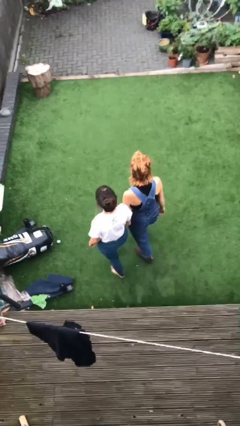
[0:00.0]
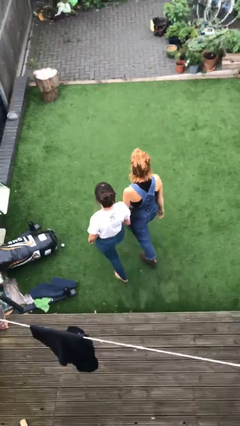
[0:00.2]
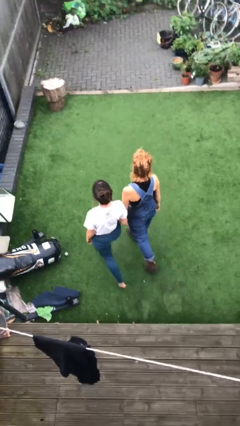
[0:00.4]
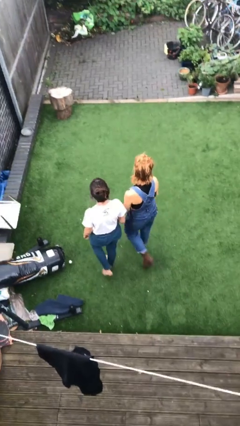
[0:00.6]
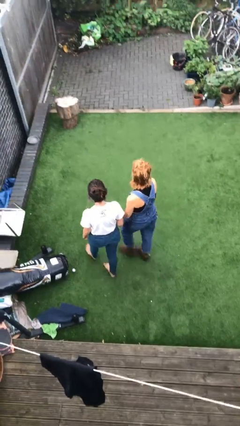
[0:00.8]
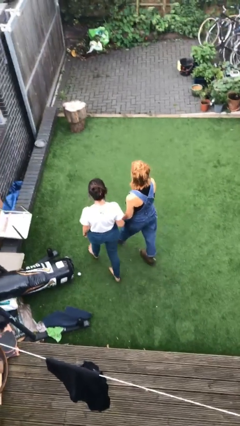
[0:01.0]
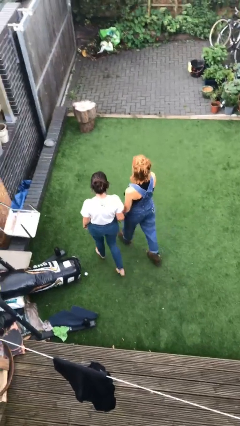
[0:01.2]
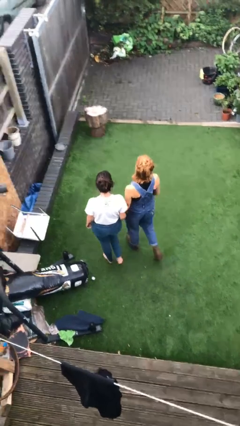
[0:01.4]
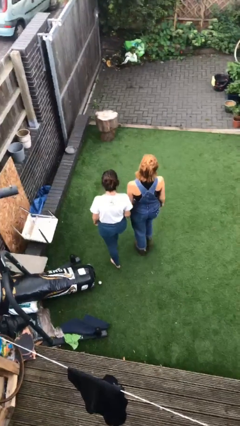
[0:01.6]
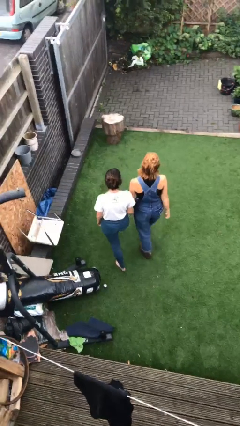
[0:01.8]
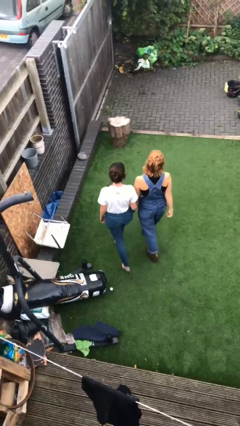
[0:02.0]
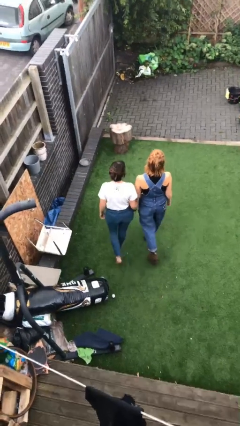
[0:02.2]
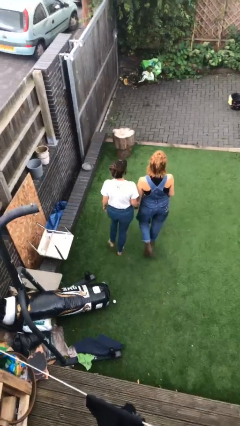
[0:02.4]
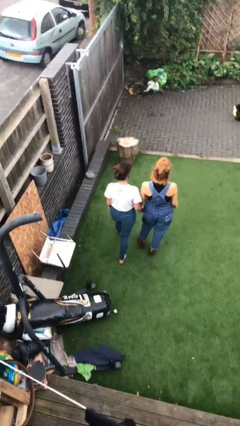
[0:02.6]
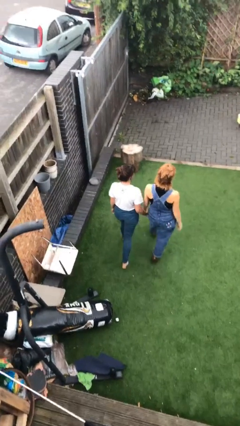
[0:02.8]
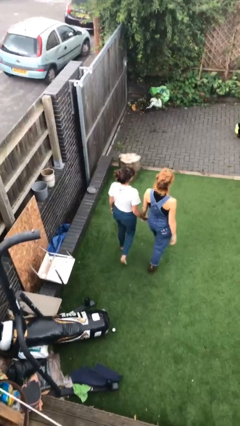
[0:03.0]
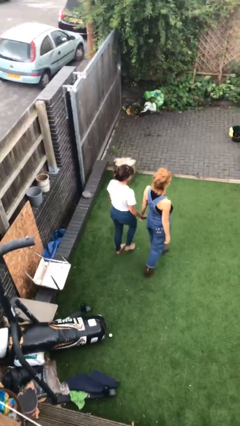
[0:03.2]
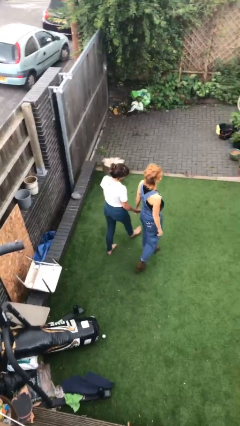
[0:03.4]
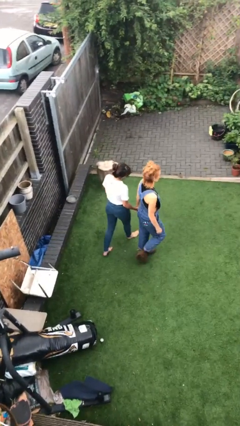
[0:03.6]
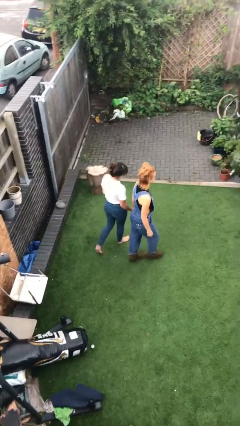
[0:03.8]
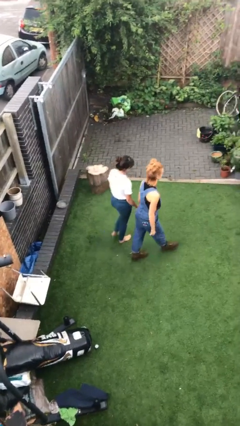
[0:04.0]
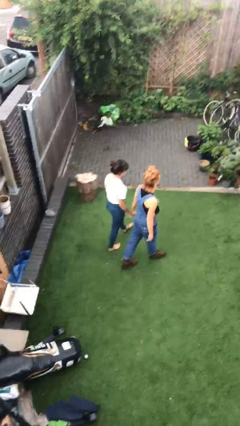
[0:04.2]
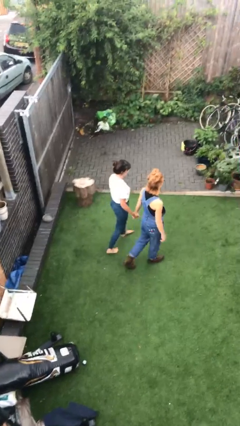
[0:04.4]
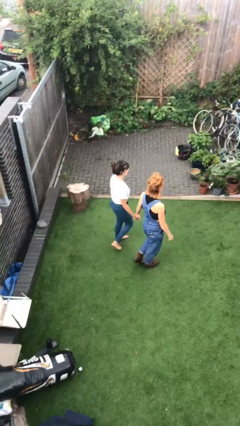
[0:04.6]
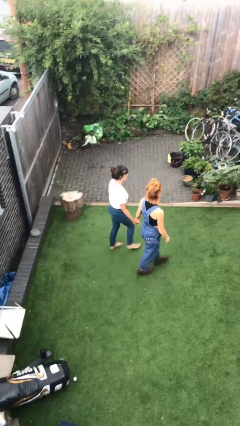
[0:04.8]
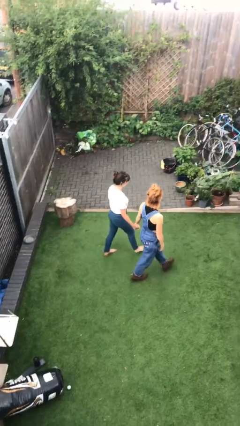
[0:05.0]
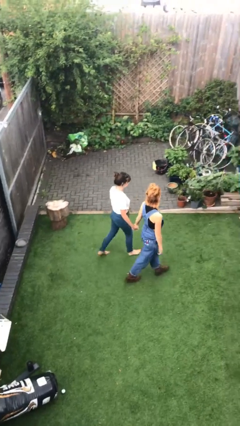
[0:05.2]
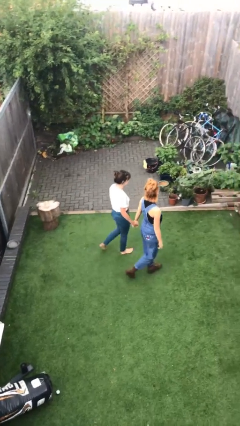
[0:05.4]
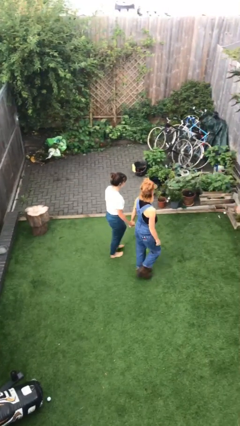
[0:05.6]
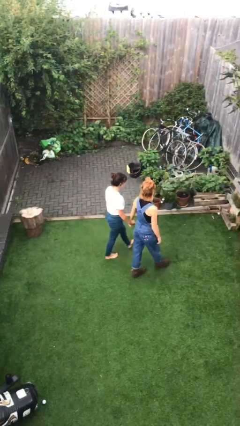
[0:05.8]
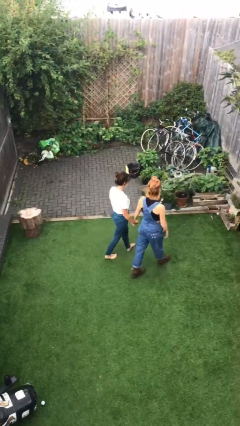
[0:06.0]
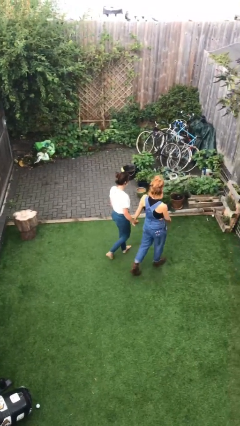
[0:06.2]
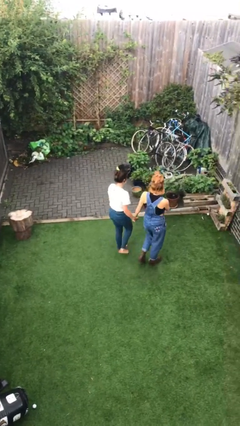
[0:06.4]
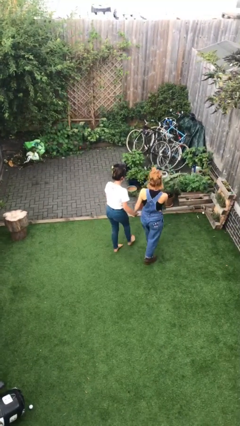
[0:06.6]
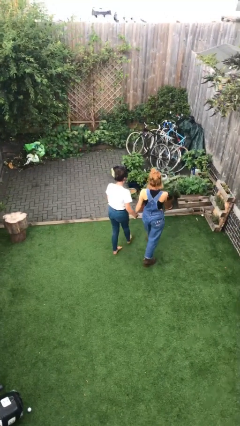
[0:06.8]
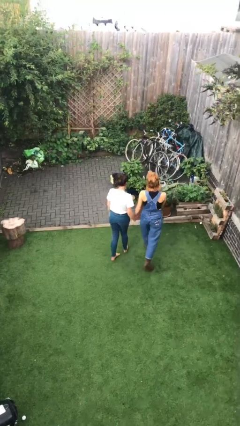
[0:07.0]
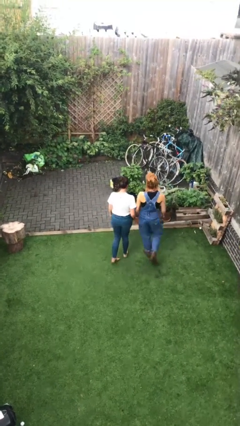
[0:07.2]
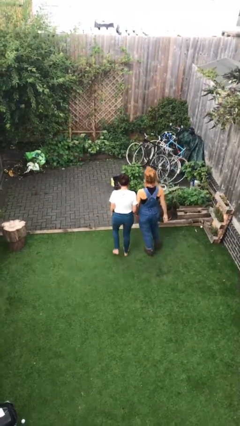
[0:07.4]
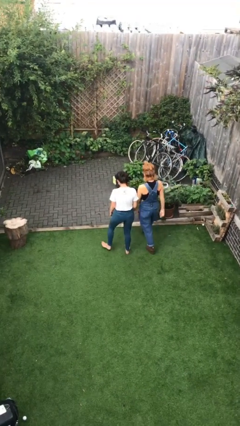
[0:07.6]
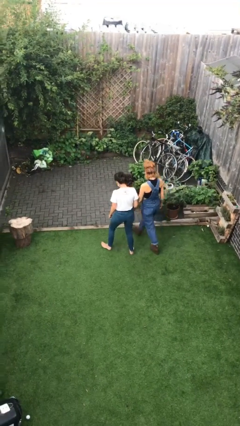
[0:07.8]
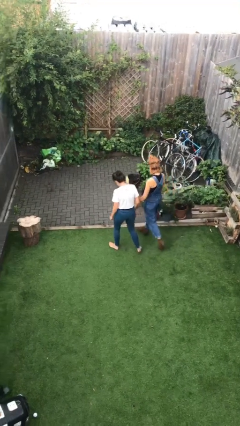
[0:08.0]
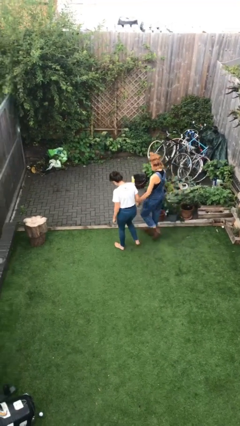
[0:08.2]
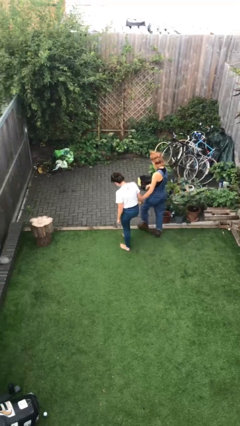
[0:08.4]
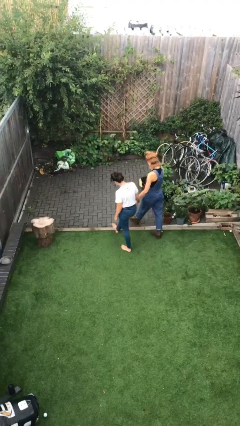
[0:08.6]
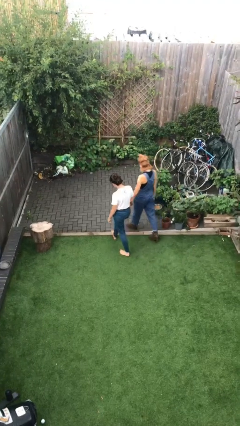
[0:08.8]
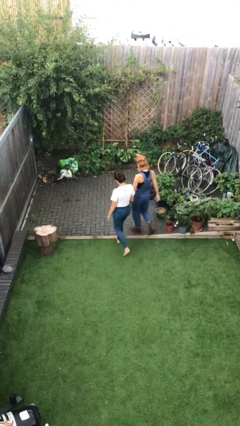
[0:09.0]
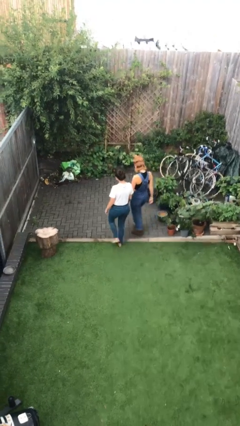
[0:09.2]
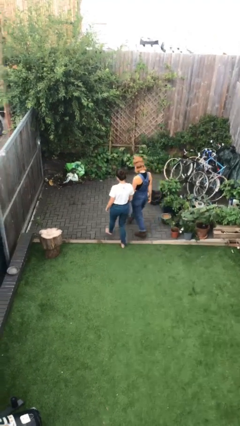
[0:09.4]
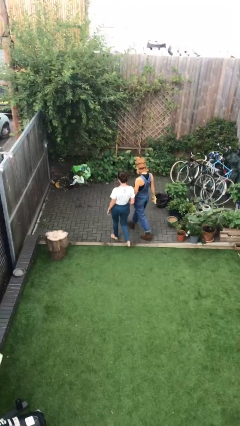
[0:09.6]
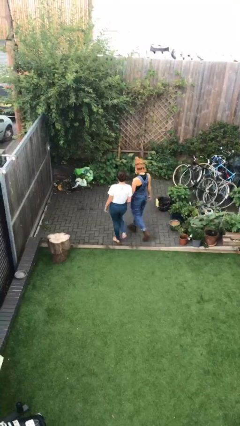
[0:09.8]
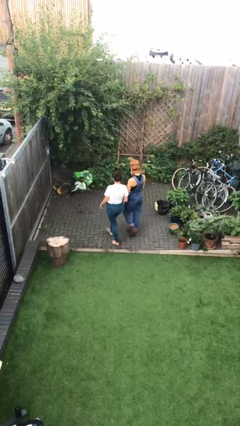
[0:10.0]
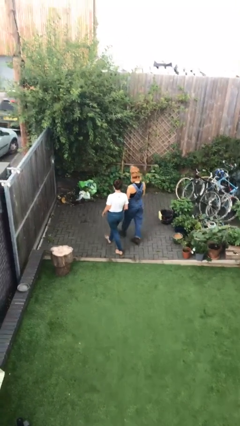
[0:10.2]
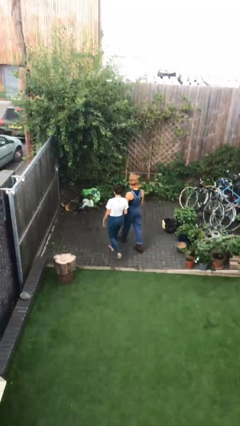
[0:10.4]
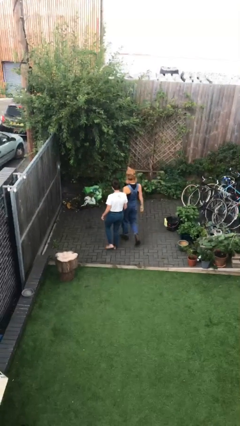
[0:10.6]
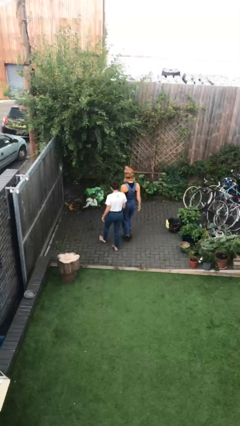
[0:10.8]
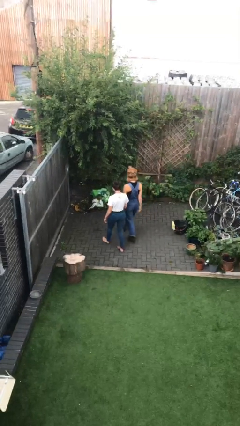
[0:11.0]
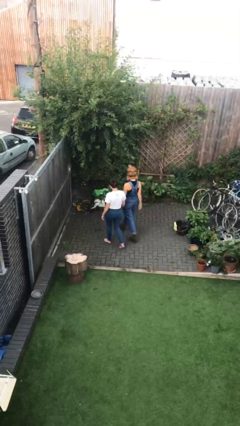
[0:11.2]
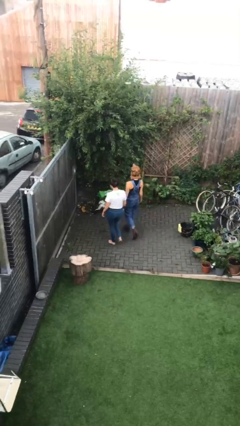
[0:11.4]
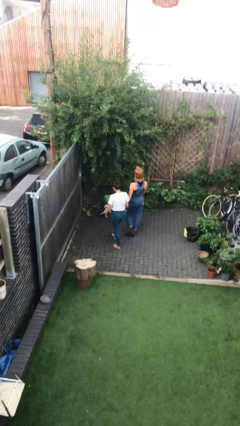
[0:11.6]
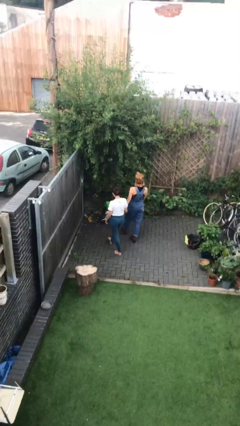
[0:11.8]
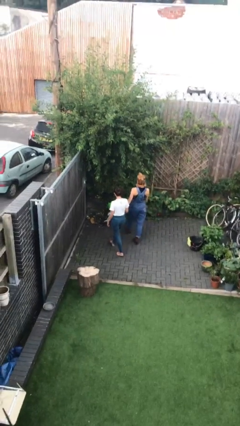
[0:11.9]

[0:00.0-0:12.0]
person holds hand

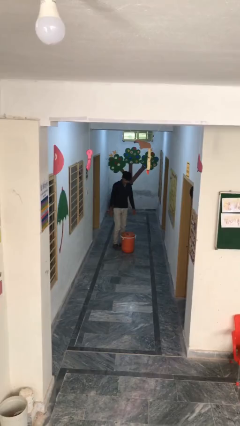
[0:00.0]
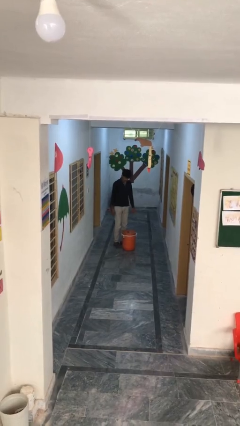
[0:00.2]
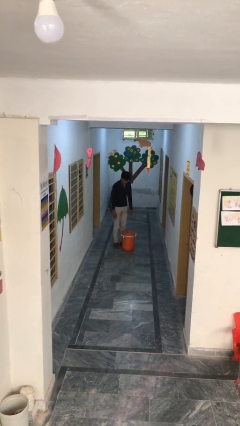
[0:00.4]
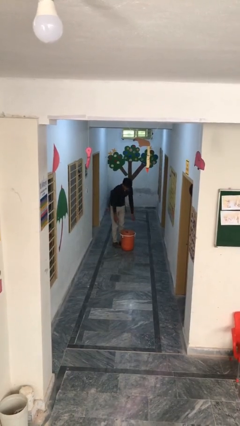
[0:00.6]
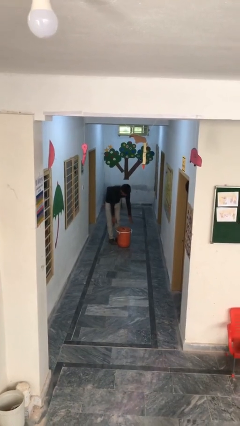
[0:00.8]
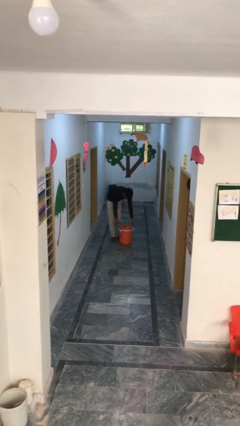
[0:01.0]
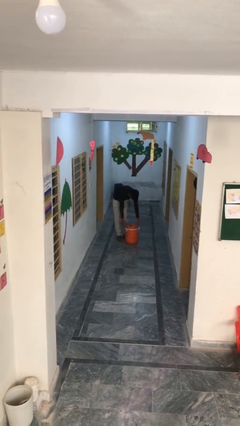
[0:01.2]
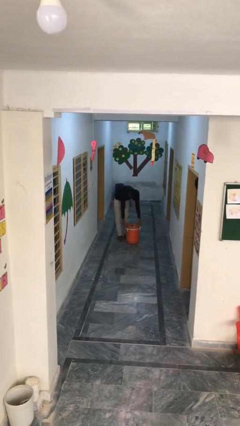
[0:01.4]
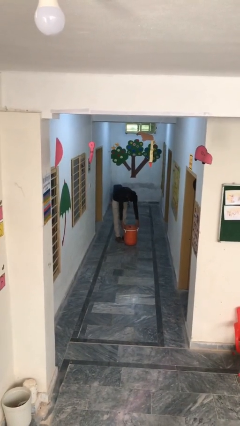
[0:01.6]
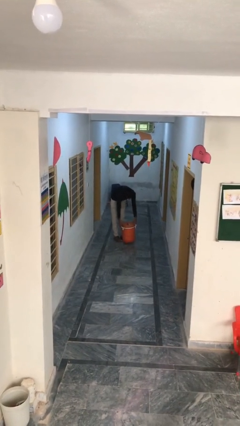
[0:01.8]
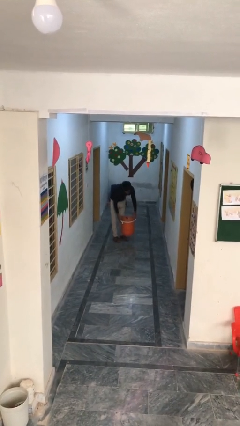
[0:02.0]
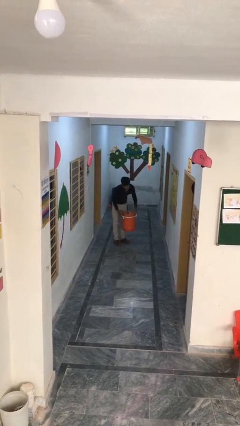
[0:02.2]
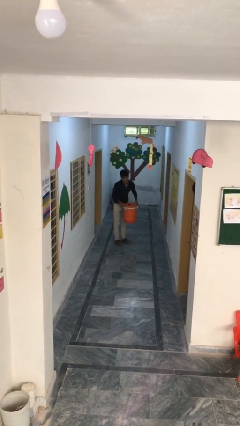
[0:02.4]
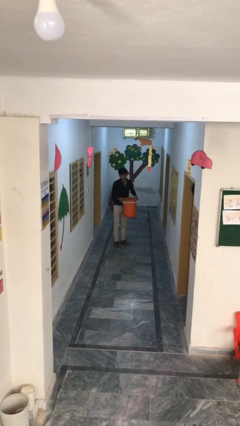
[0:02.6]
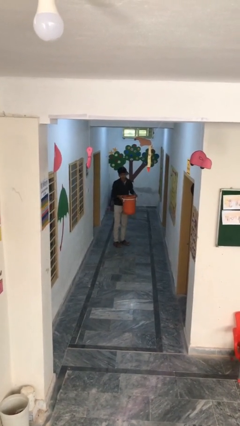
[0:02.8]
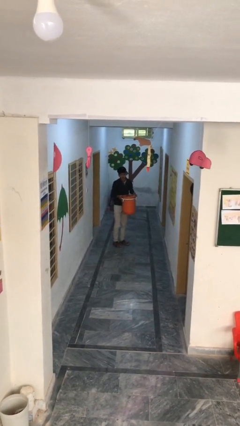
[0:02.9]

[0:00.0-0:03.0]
person picks up object from floor

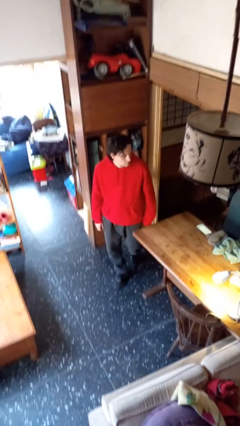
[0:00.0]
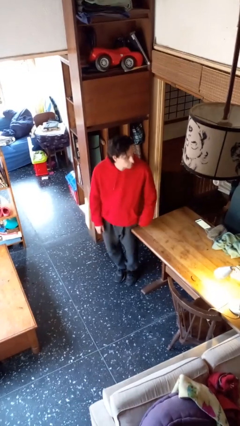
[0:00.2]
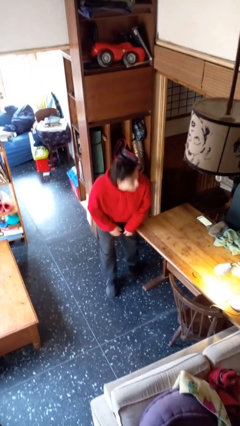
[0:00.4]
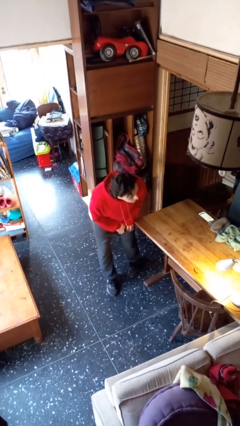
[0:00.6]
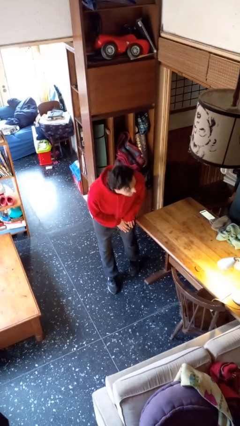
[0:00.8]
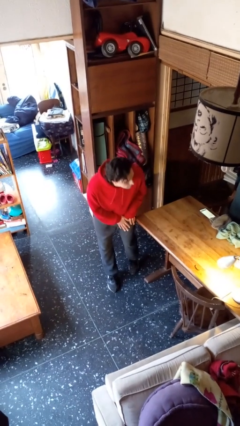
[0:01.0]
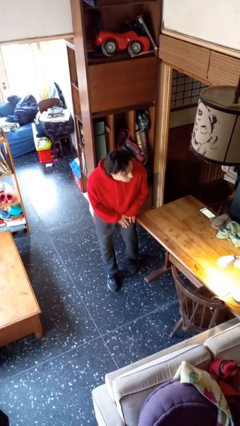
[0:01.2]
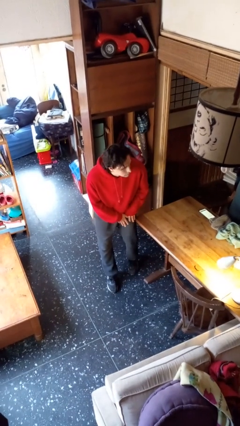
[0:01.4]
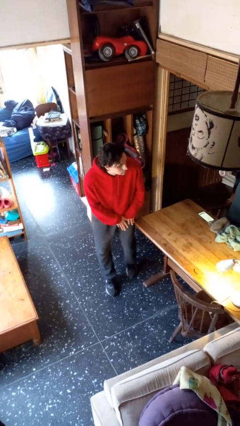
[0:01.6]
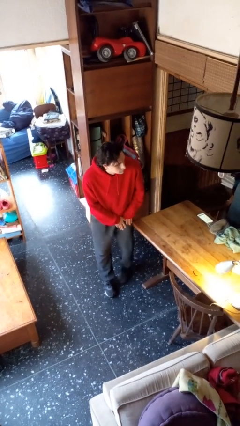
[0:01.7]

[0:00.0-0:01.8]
person bumps into table

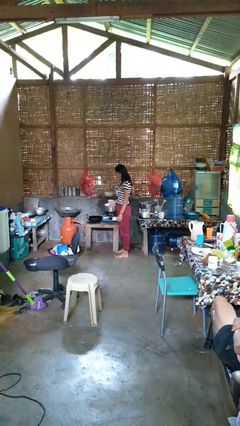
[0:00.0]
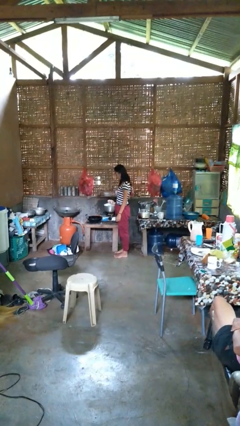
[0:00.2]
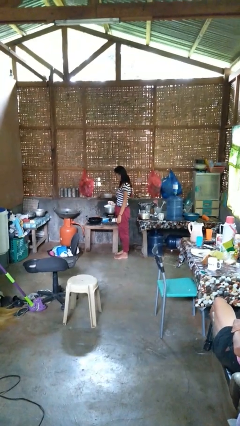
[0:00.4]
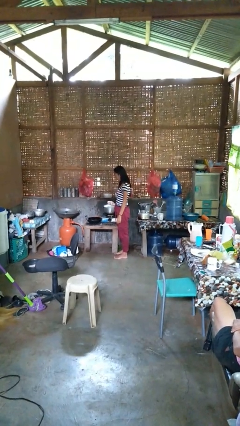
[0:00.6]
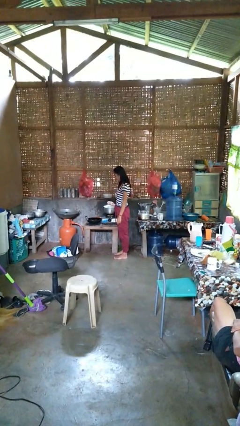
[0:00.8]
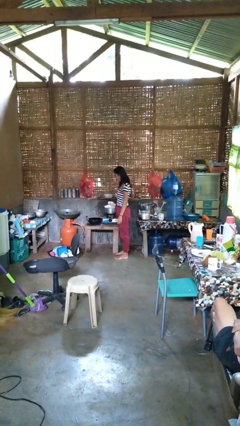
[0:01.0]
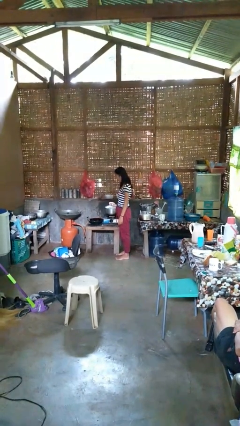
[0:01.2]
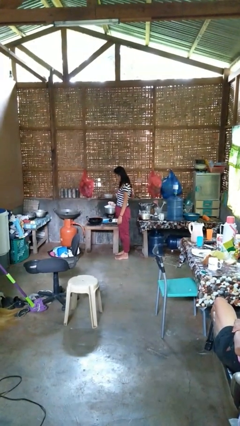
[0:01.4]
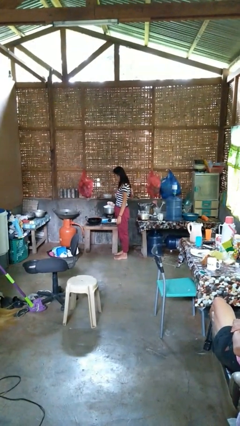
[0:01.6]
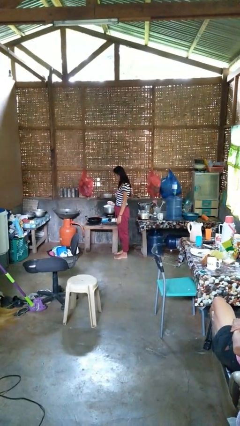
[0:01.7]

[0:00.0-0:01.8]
person burns hand
